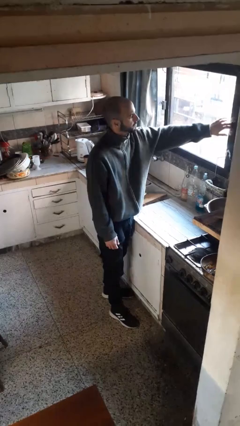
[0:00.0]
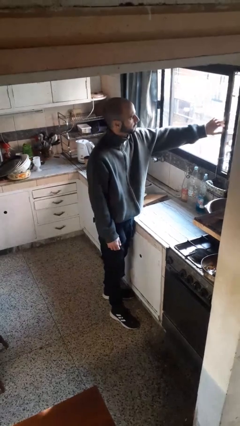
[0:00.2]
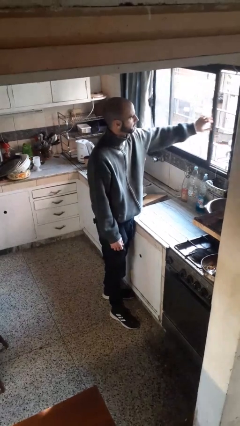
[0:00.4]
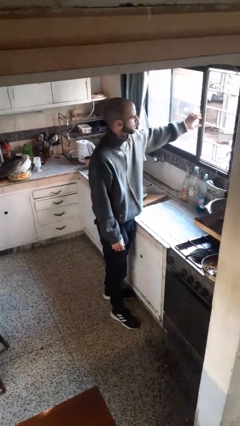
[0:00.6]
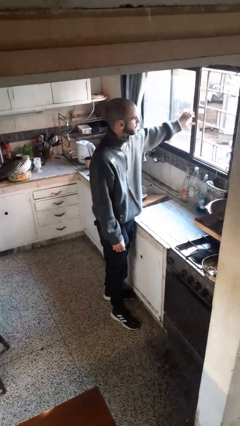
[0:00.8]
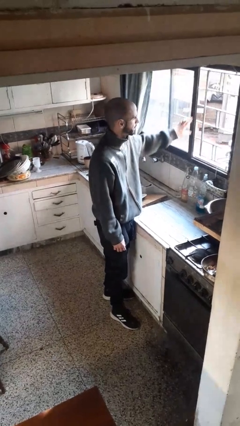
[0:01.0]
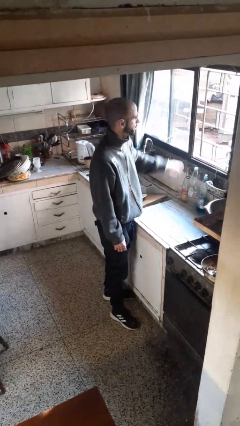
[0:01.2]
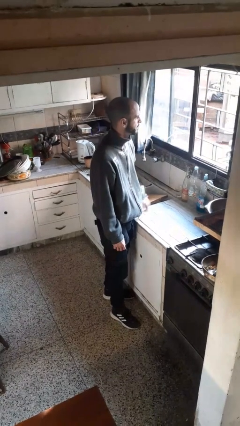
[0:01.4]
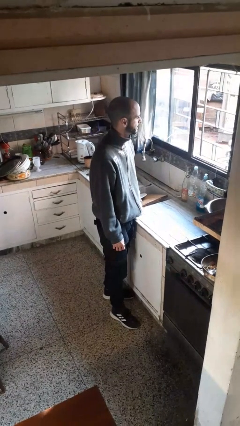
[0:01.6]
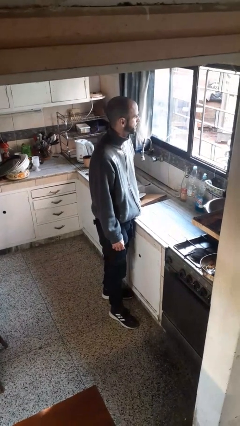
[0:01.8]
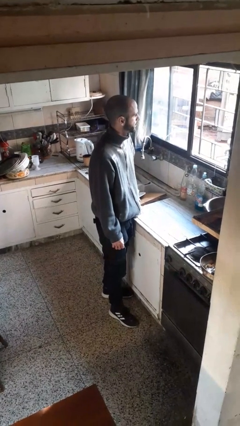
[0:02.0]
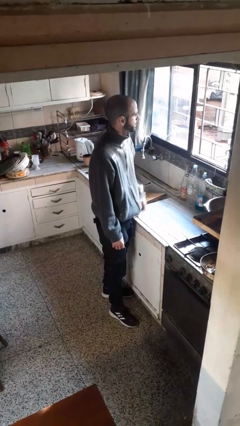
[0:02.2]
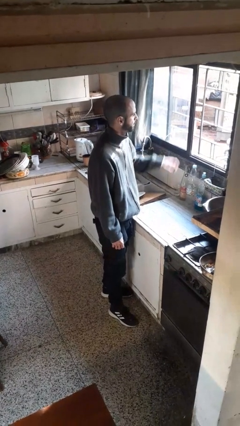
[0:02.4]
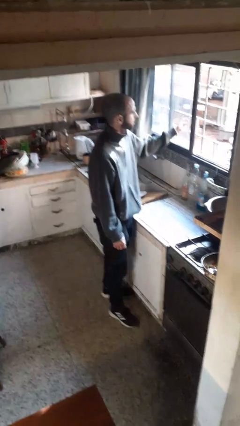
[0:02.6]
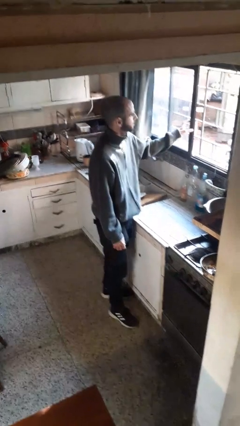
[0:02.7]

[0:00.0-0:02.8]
person opens home window

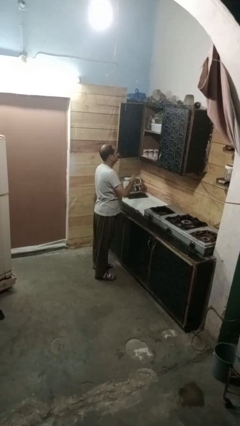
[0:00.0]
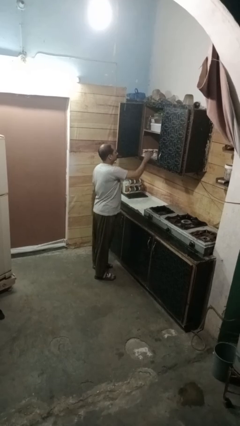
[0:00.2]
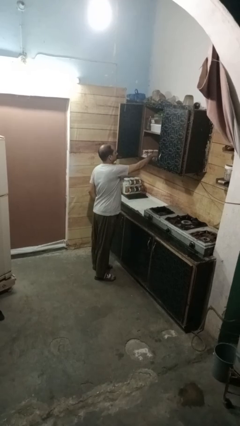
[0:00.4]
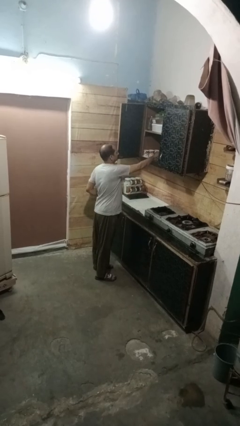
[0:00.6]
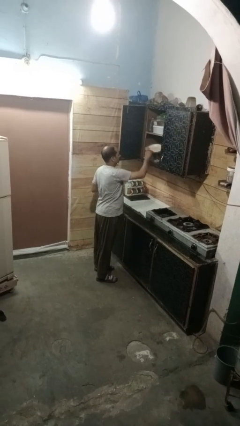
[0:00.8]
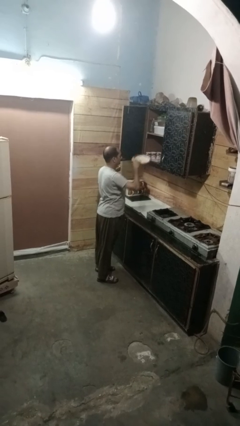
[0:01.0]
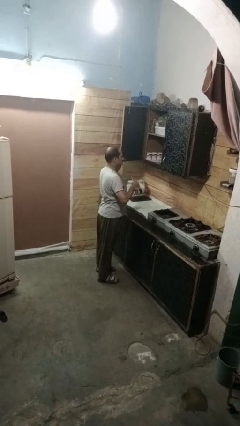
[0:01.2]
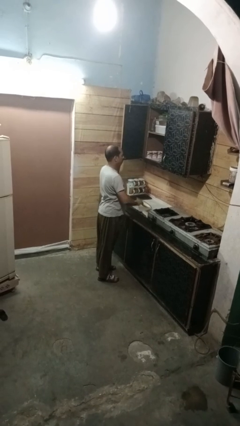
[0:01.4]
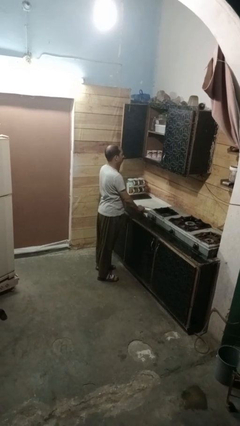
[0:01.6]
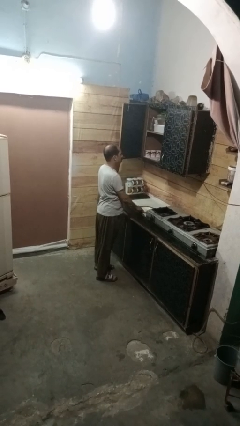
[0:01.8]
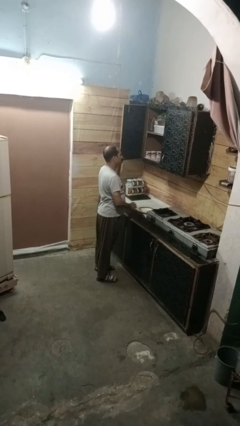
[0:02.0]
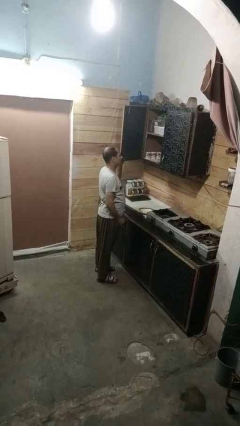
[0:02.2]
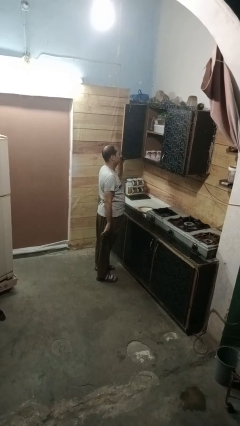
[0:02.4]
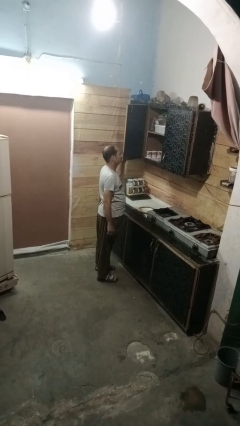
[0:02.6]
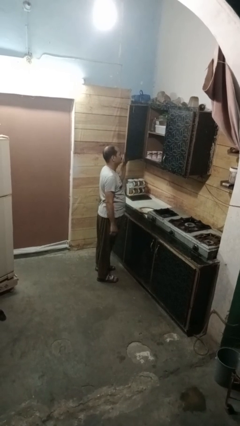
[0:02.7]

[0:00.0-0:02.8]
person takes object from cabinet

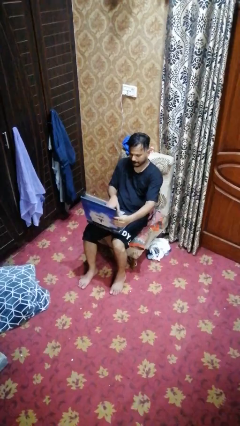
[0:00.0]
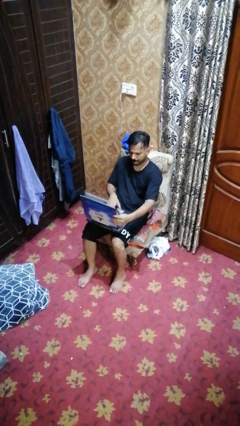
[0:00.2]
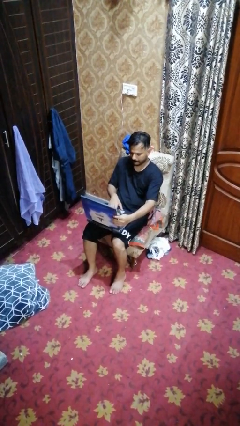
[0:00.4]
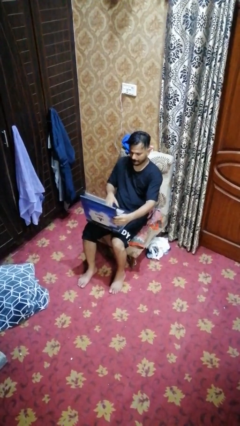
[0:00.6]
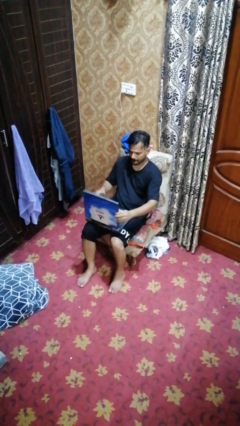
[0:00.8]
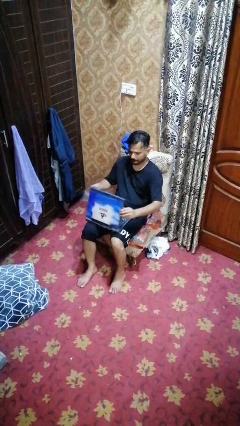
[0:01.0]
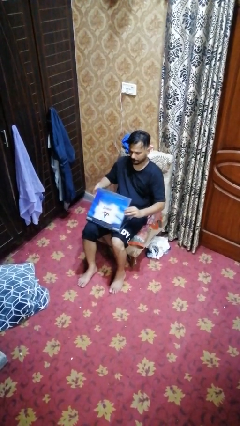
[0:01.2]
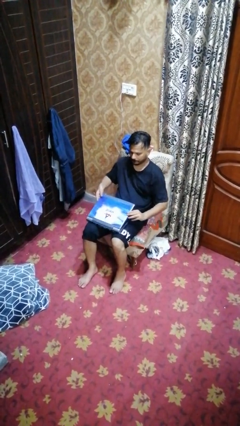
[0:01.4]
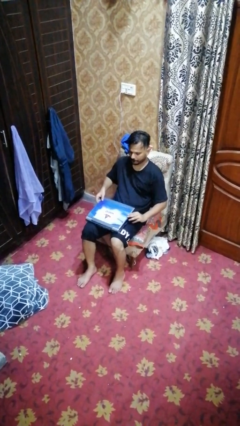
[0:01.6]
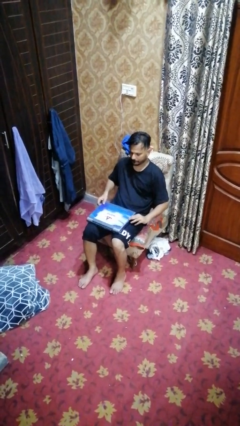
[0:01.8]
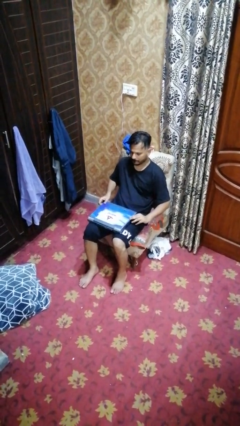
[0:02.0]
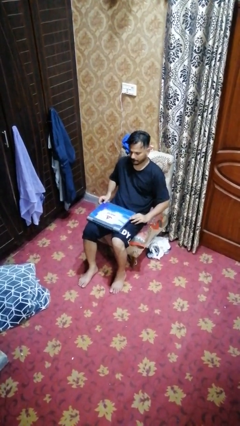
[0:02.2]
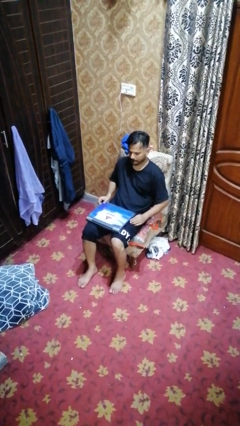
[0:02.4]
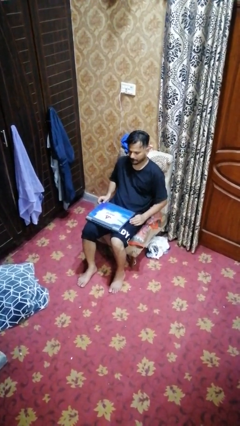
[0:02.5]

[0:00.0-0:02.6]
person closes laptop

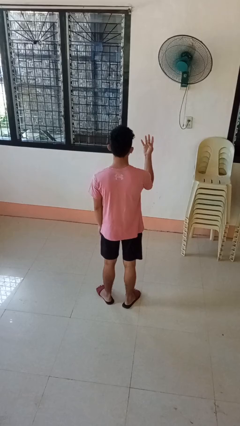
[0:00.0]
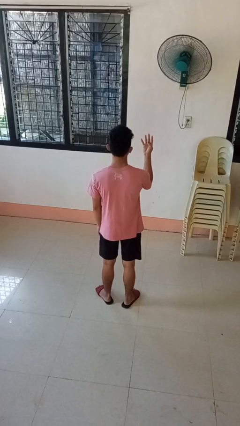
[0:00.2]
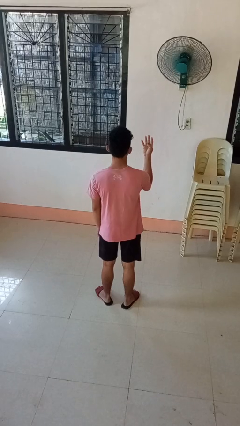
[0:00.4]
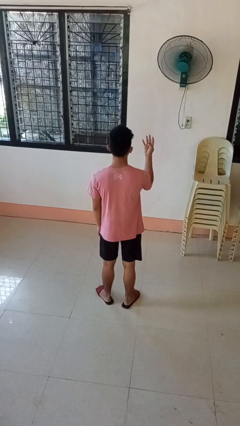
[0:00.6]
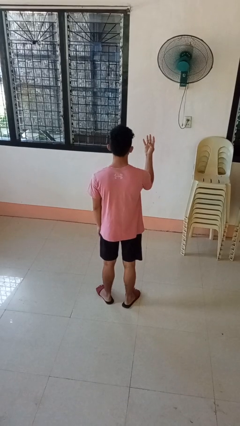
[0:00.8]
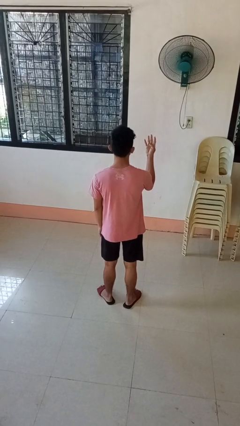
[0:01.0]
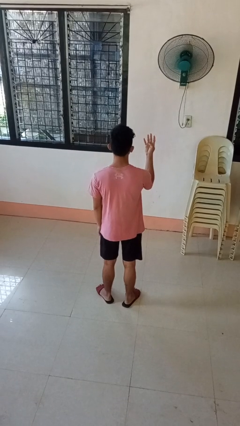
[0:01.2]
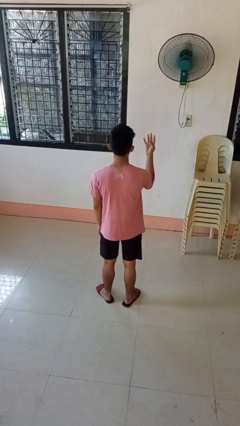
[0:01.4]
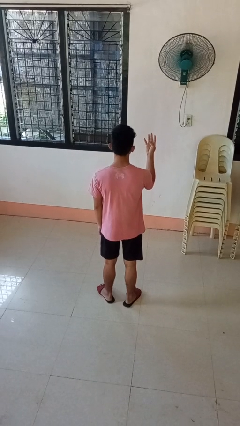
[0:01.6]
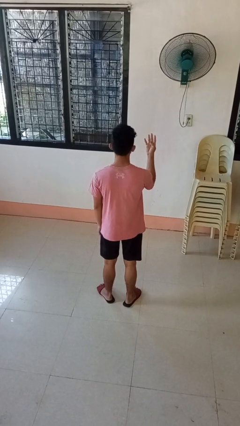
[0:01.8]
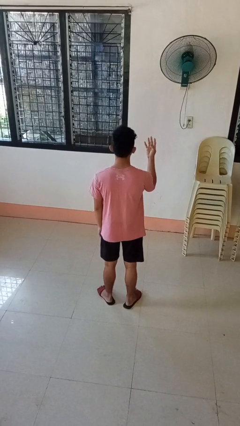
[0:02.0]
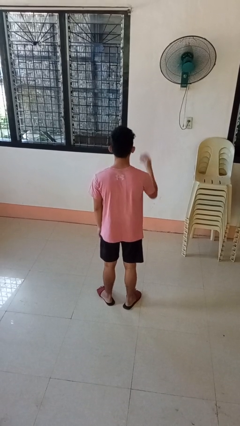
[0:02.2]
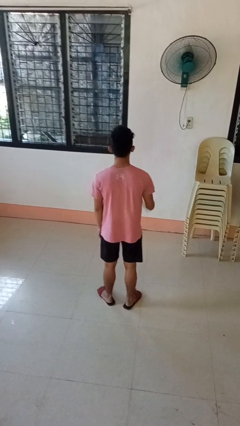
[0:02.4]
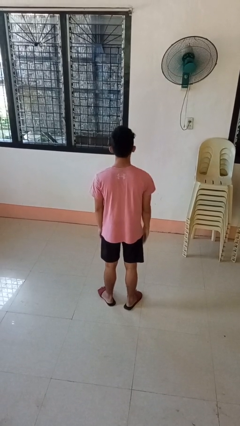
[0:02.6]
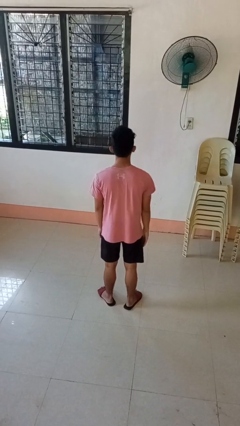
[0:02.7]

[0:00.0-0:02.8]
person gestures number four

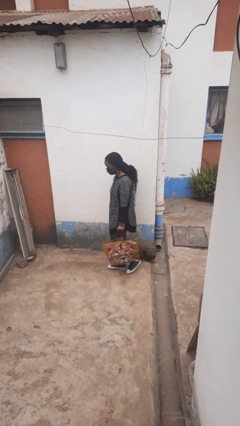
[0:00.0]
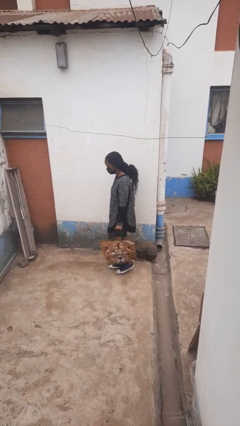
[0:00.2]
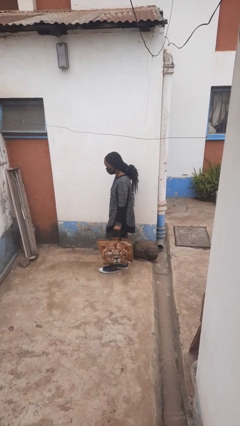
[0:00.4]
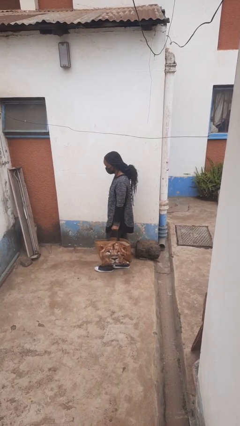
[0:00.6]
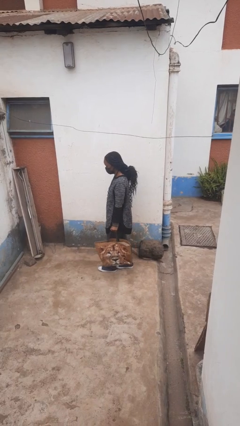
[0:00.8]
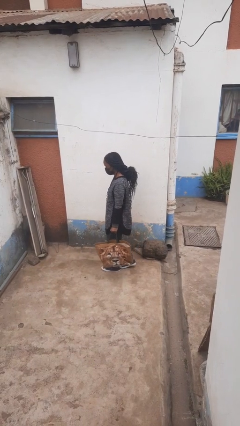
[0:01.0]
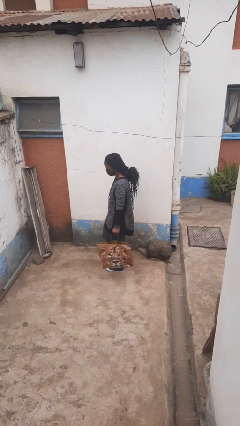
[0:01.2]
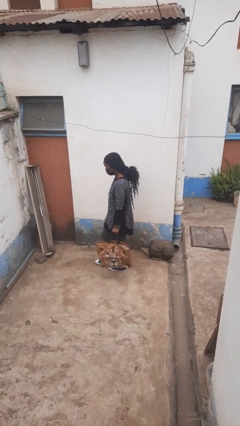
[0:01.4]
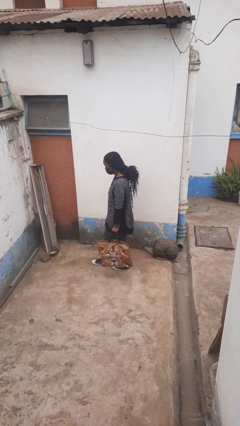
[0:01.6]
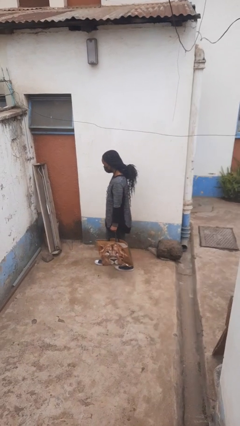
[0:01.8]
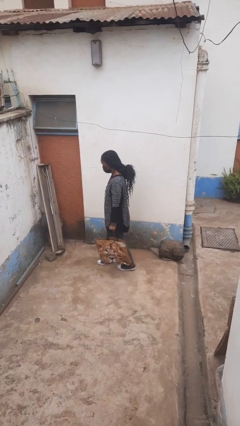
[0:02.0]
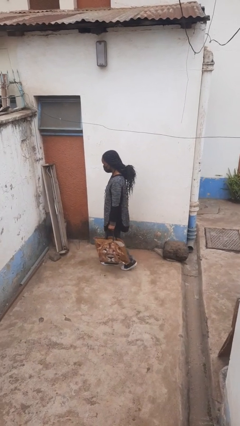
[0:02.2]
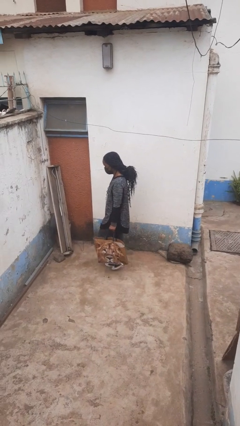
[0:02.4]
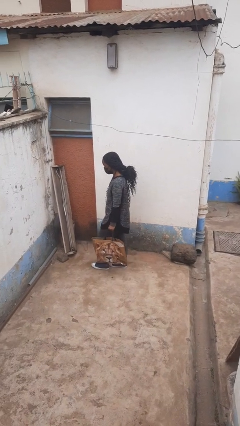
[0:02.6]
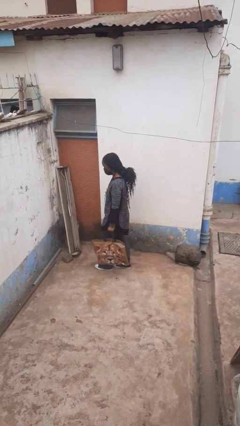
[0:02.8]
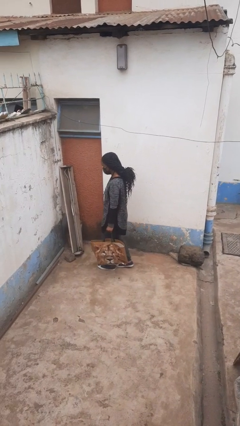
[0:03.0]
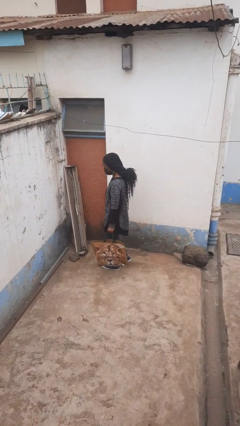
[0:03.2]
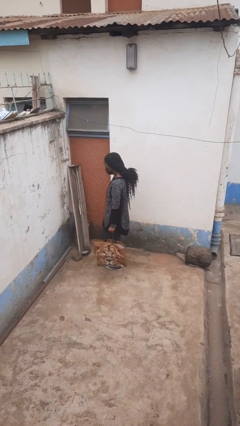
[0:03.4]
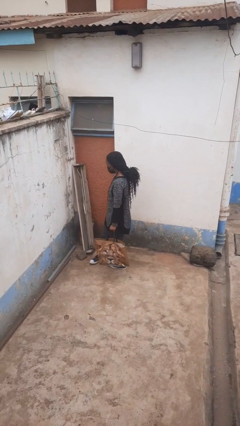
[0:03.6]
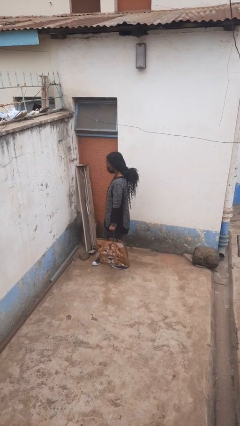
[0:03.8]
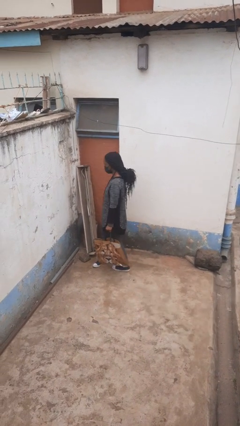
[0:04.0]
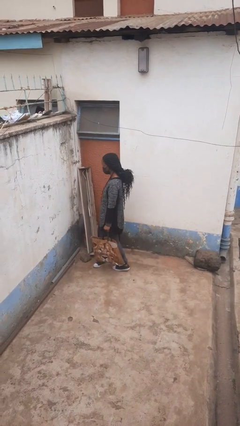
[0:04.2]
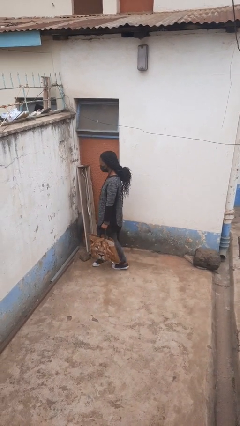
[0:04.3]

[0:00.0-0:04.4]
person carries groceries

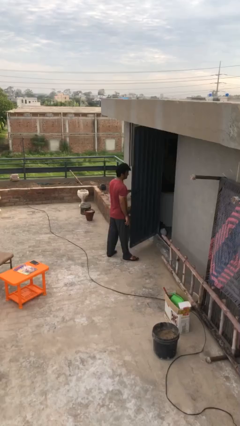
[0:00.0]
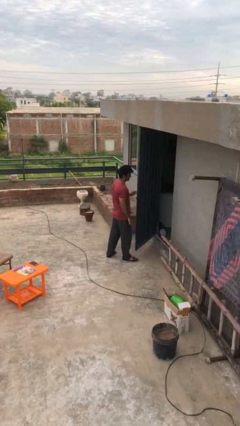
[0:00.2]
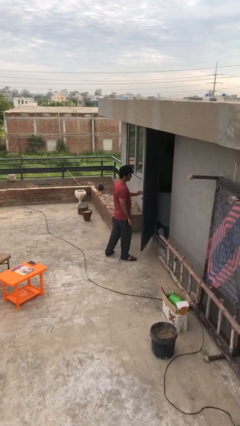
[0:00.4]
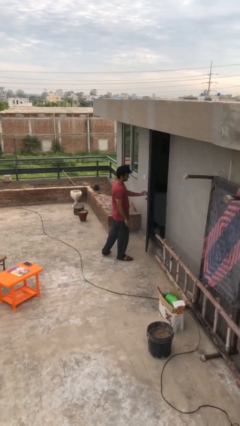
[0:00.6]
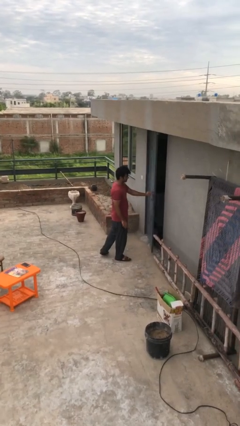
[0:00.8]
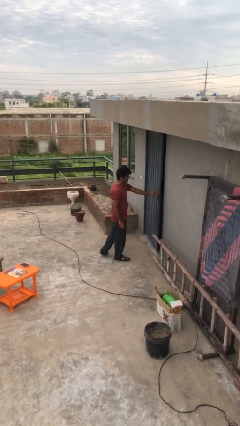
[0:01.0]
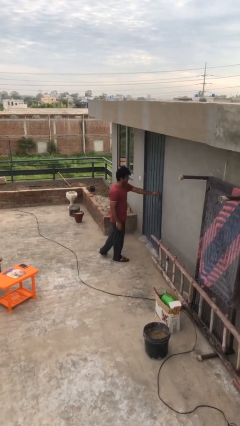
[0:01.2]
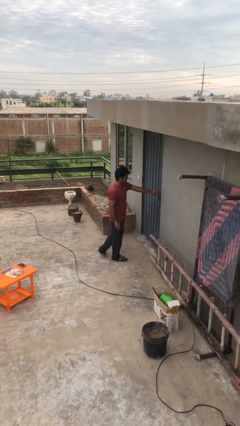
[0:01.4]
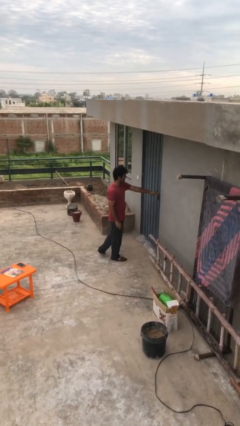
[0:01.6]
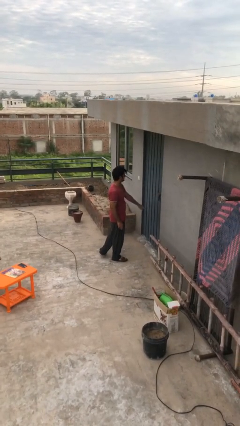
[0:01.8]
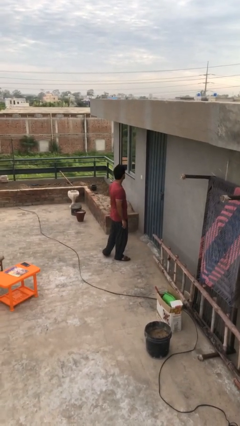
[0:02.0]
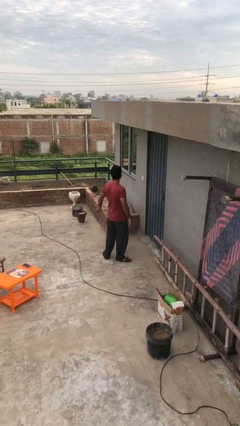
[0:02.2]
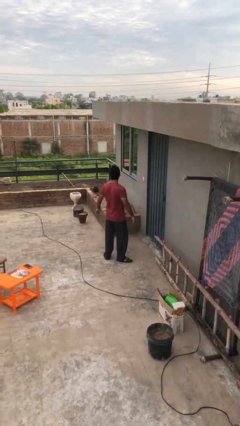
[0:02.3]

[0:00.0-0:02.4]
person closes facility door
